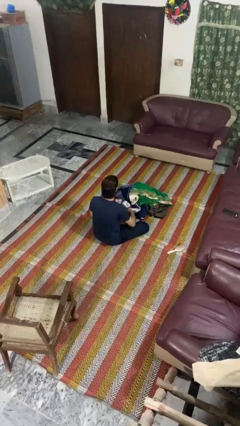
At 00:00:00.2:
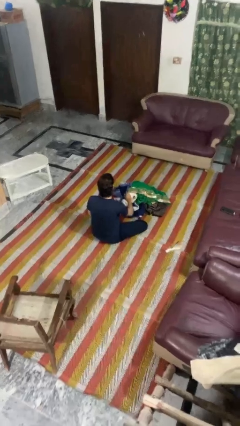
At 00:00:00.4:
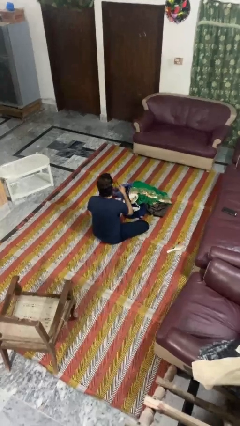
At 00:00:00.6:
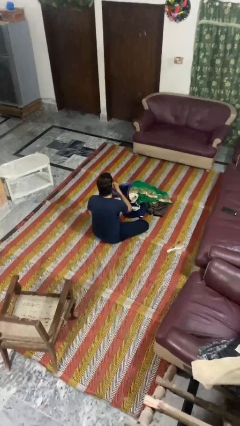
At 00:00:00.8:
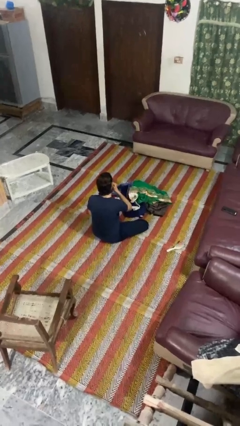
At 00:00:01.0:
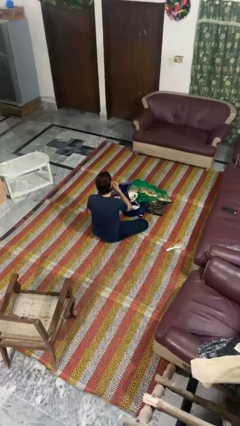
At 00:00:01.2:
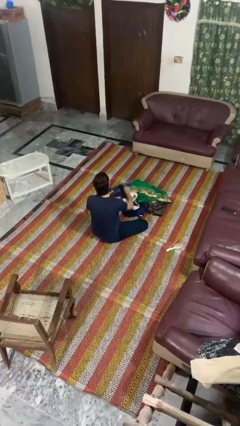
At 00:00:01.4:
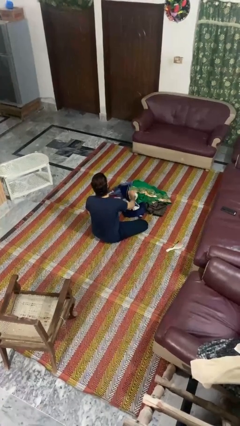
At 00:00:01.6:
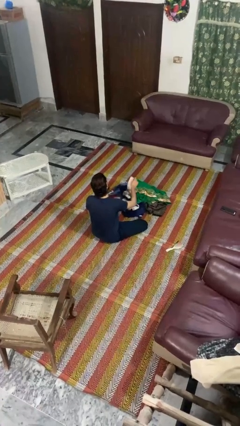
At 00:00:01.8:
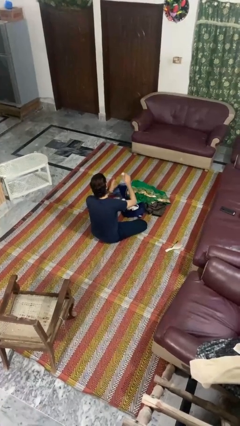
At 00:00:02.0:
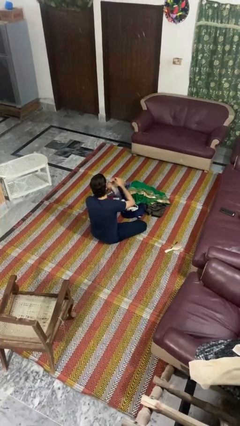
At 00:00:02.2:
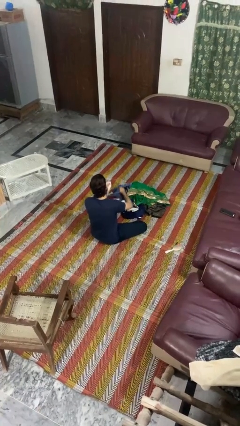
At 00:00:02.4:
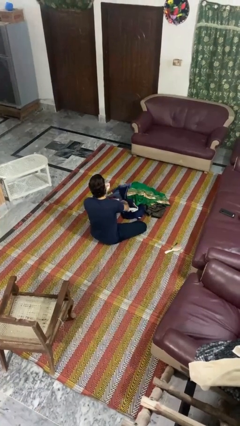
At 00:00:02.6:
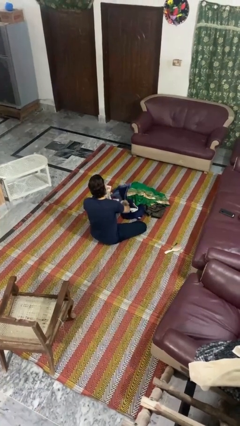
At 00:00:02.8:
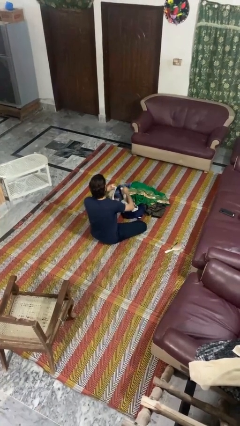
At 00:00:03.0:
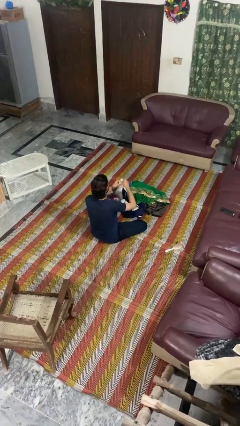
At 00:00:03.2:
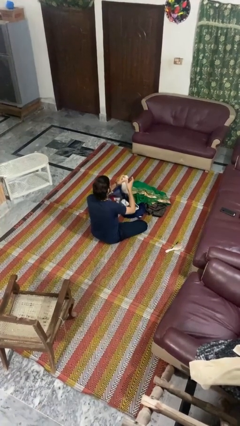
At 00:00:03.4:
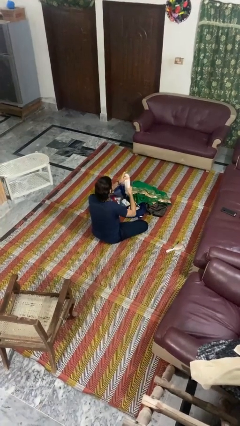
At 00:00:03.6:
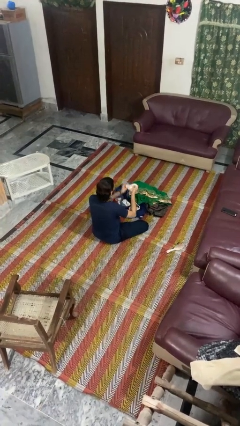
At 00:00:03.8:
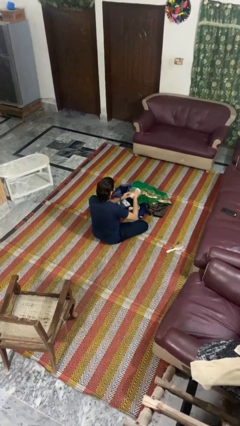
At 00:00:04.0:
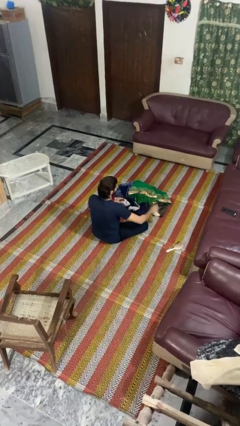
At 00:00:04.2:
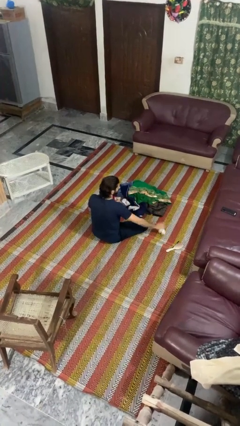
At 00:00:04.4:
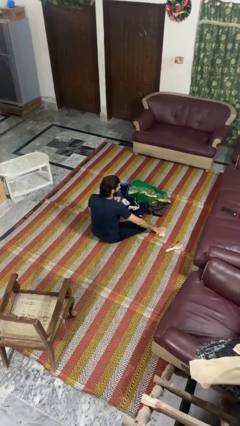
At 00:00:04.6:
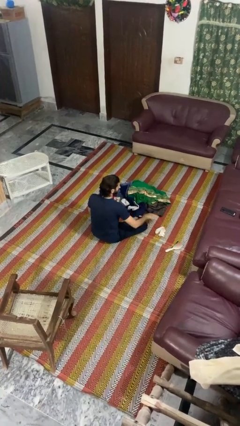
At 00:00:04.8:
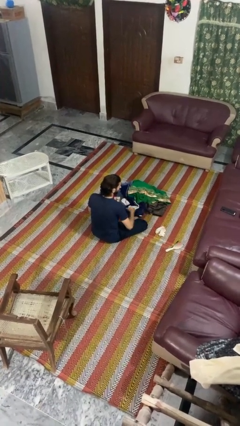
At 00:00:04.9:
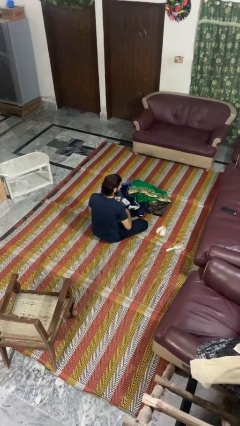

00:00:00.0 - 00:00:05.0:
person folds socks

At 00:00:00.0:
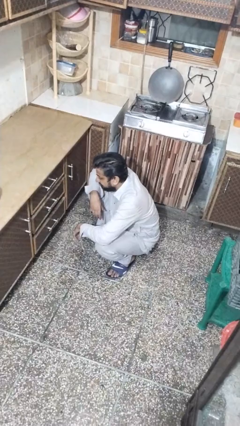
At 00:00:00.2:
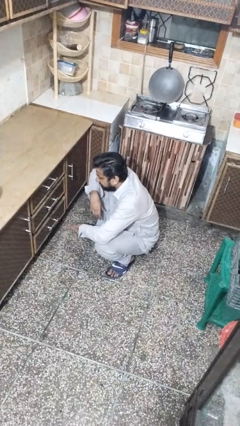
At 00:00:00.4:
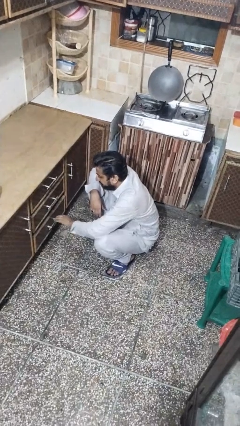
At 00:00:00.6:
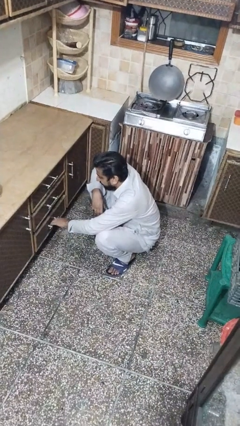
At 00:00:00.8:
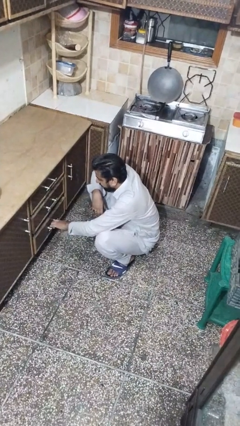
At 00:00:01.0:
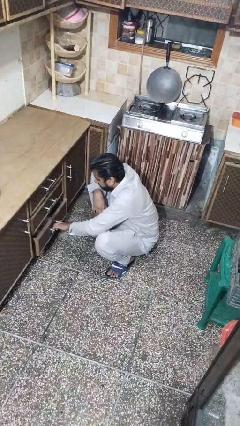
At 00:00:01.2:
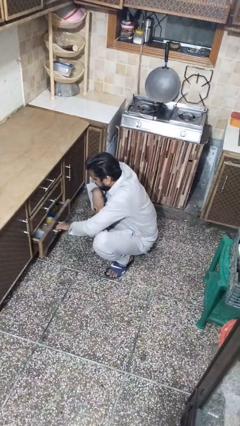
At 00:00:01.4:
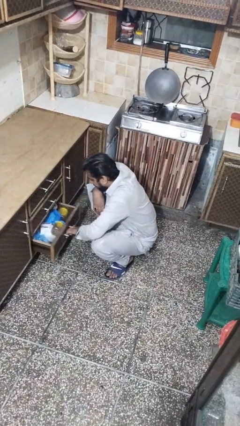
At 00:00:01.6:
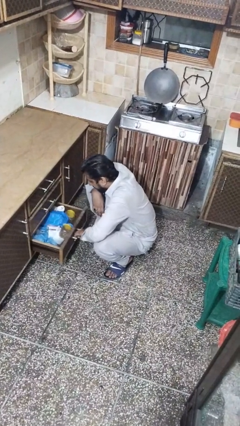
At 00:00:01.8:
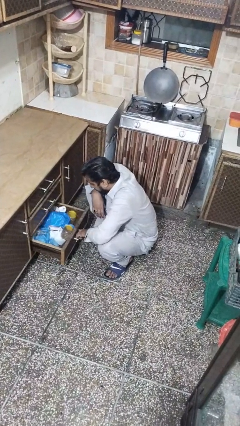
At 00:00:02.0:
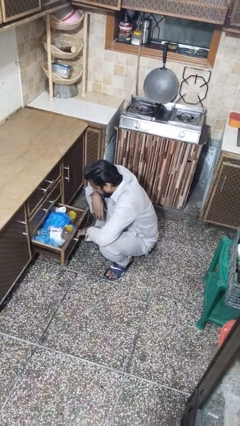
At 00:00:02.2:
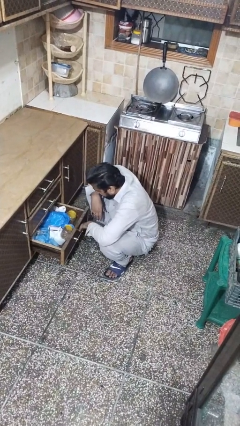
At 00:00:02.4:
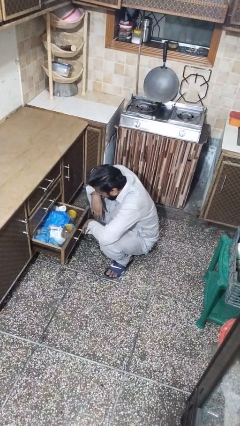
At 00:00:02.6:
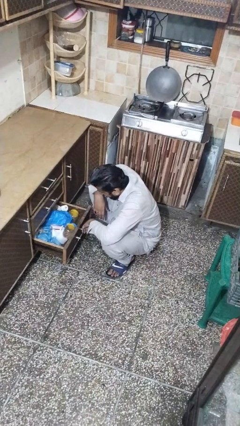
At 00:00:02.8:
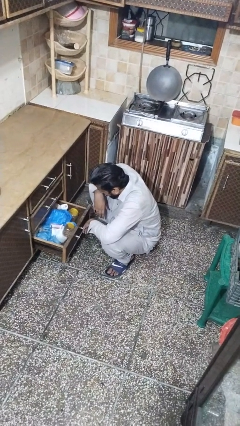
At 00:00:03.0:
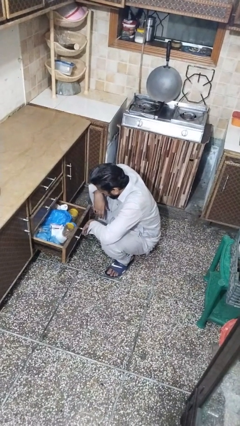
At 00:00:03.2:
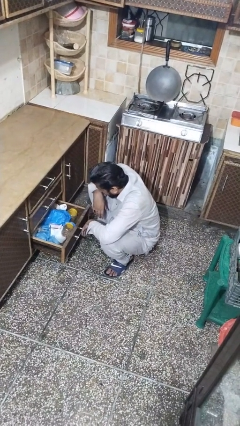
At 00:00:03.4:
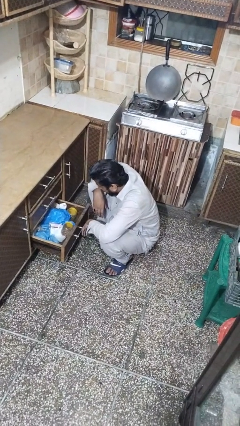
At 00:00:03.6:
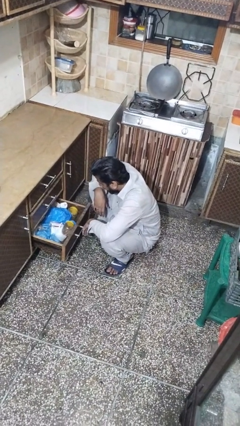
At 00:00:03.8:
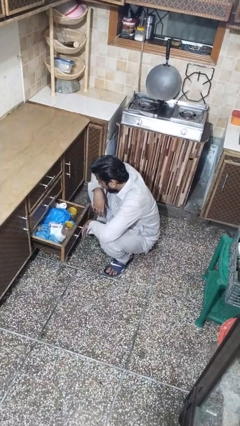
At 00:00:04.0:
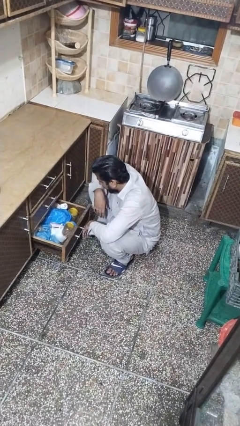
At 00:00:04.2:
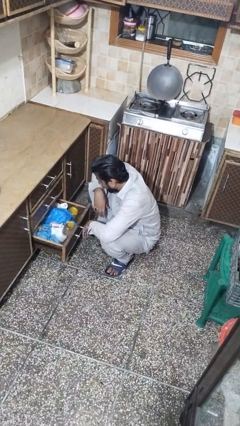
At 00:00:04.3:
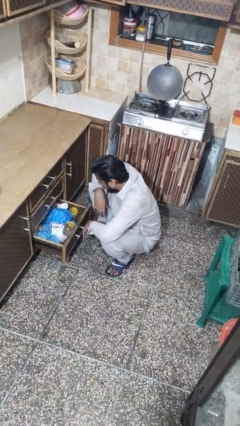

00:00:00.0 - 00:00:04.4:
person opens kitchen drawer

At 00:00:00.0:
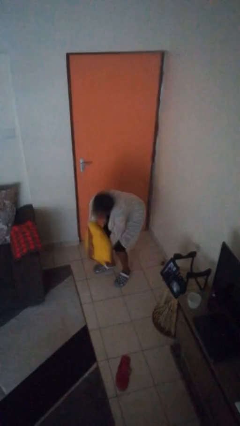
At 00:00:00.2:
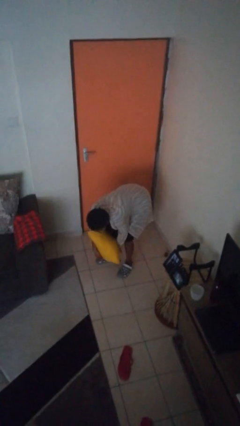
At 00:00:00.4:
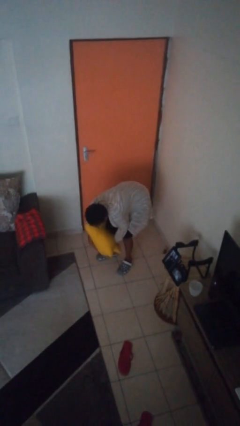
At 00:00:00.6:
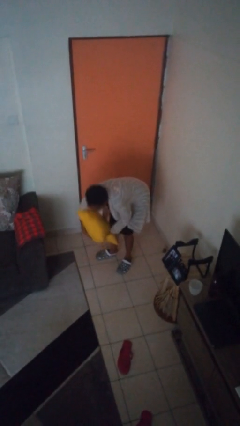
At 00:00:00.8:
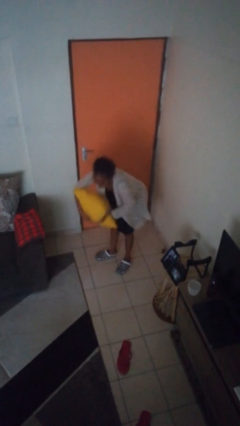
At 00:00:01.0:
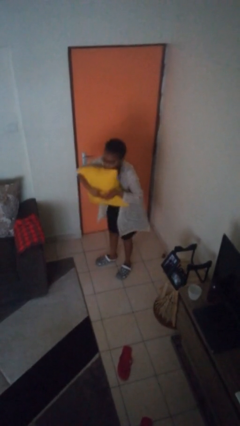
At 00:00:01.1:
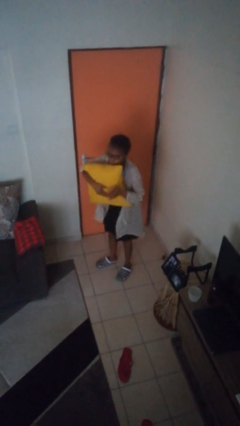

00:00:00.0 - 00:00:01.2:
person catches dropped object

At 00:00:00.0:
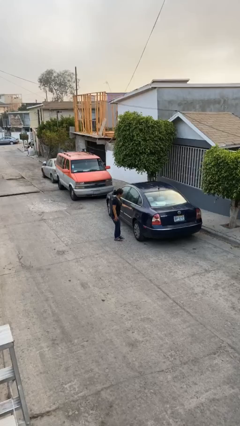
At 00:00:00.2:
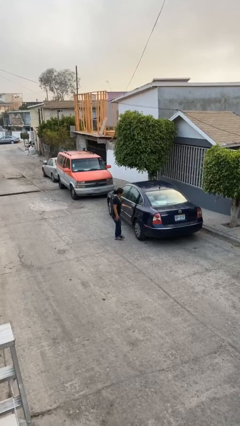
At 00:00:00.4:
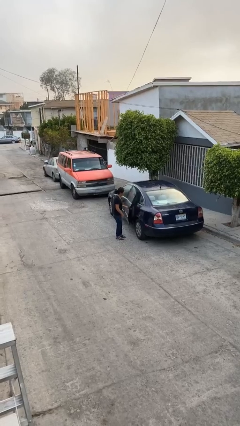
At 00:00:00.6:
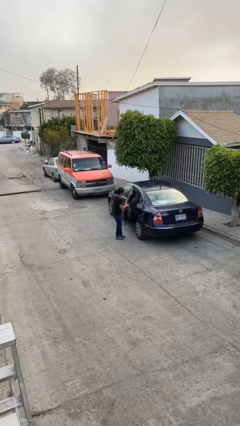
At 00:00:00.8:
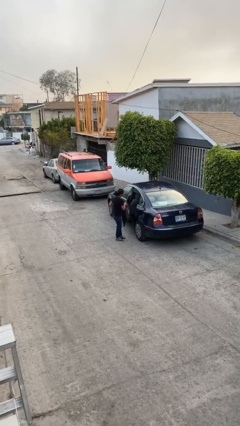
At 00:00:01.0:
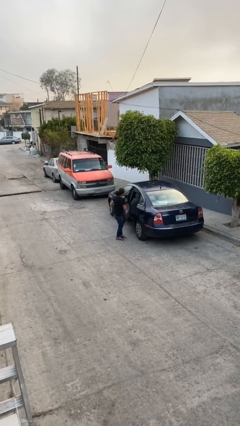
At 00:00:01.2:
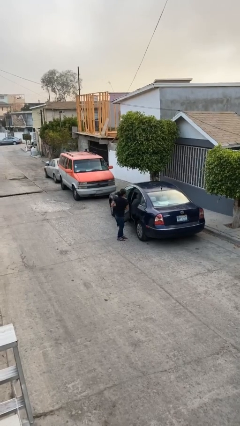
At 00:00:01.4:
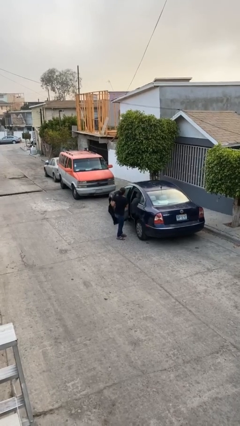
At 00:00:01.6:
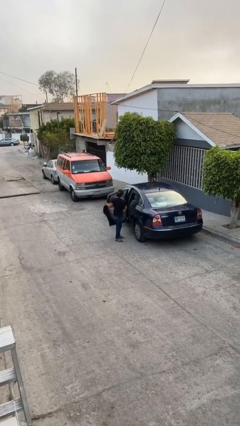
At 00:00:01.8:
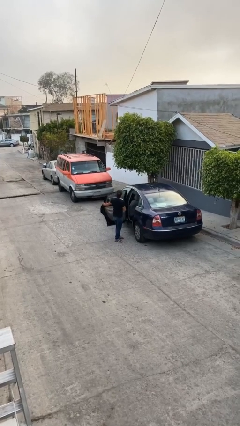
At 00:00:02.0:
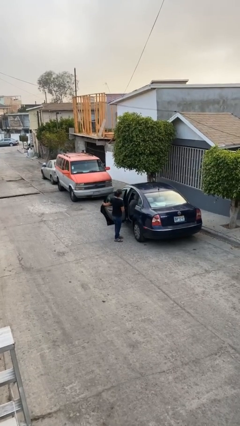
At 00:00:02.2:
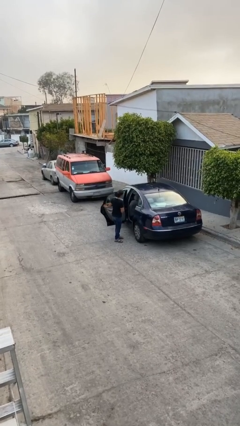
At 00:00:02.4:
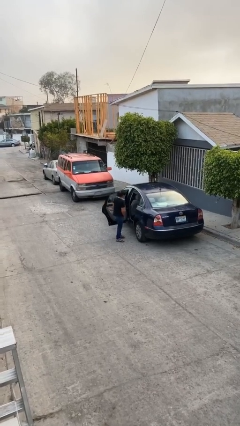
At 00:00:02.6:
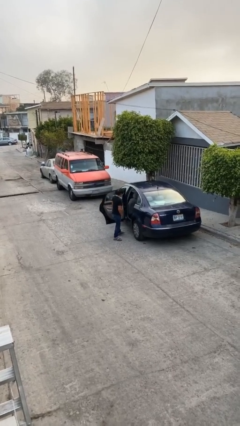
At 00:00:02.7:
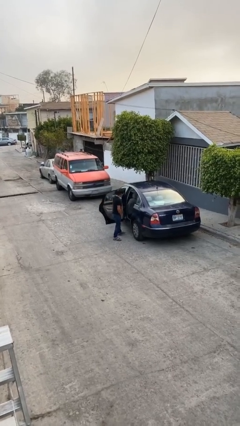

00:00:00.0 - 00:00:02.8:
person opens car door

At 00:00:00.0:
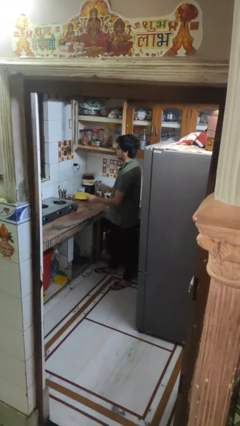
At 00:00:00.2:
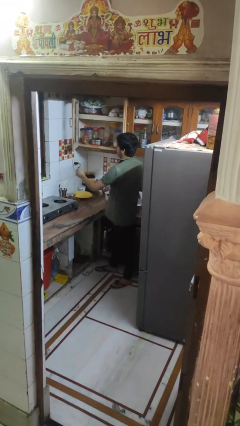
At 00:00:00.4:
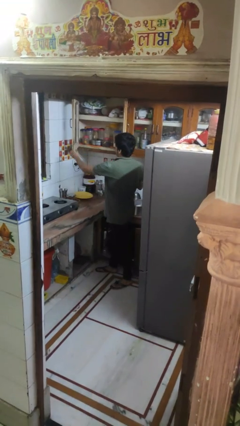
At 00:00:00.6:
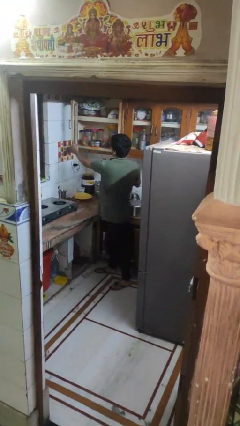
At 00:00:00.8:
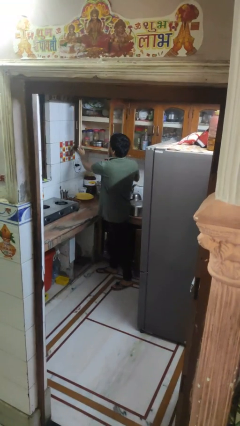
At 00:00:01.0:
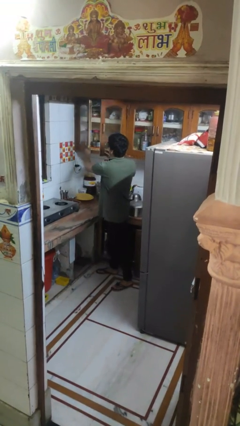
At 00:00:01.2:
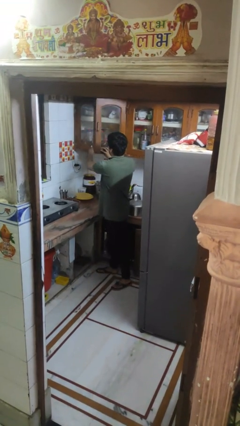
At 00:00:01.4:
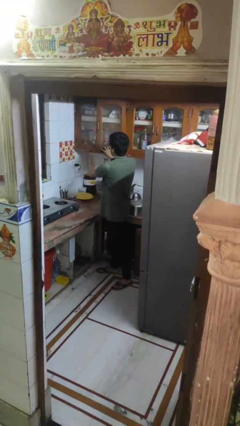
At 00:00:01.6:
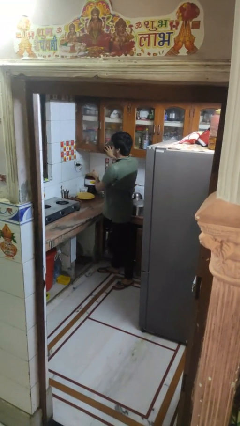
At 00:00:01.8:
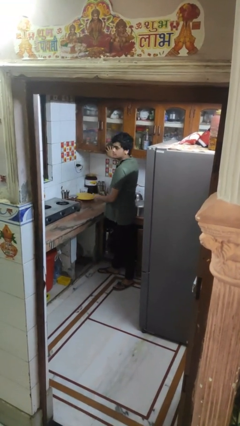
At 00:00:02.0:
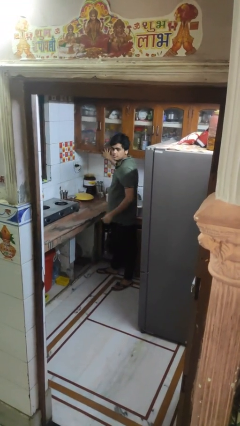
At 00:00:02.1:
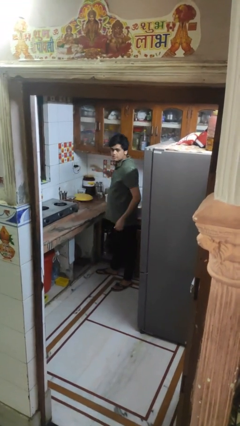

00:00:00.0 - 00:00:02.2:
person closes cabinet

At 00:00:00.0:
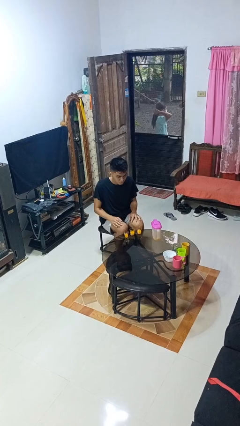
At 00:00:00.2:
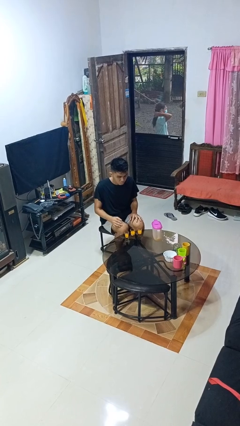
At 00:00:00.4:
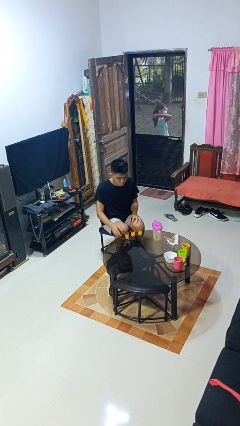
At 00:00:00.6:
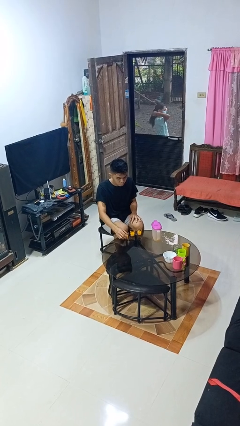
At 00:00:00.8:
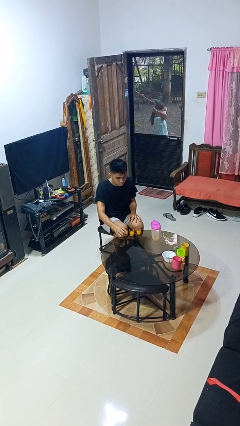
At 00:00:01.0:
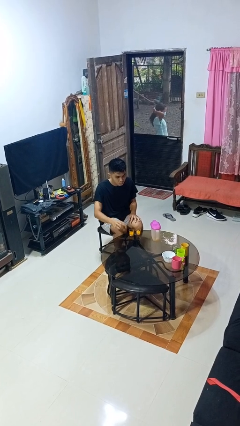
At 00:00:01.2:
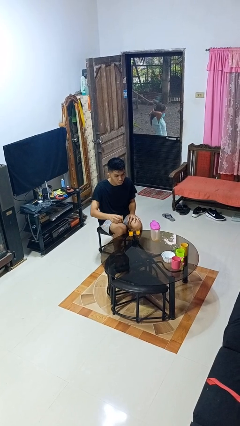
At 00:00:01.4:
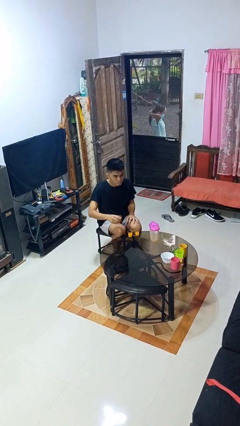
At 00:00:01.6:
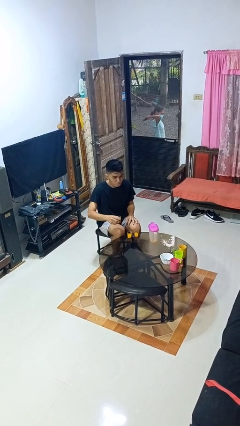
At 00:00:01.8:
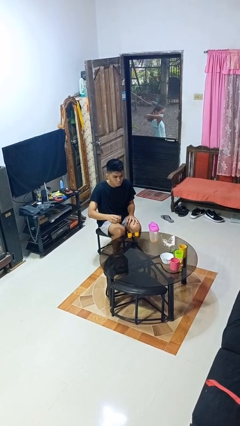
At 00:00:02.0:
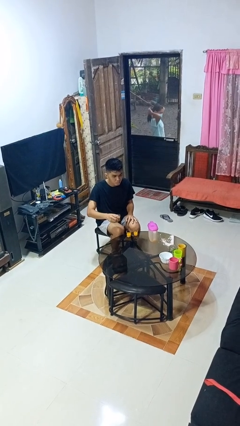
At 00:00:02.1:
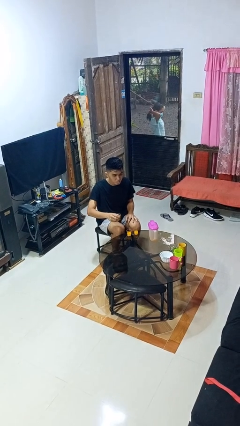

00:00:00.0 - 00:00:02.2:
person picks up object from table
